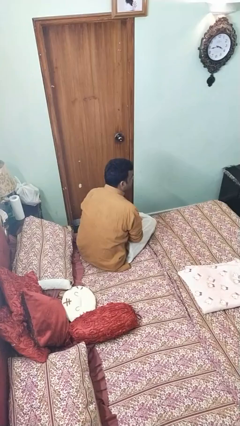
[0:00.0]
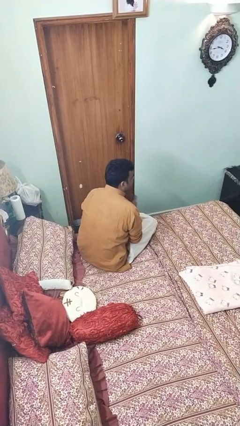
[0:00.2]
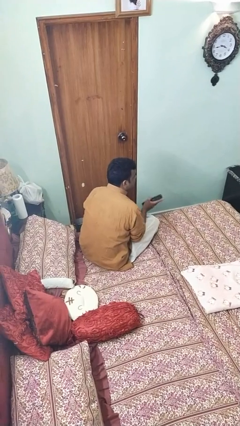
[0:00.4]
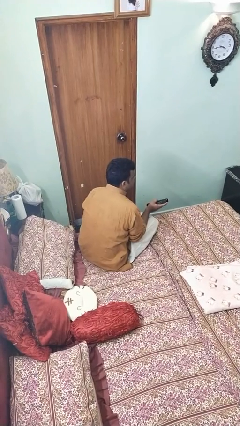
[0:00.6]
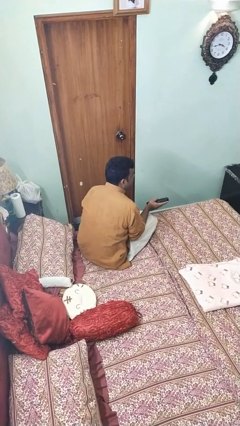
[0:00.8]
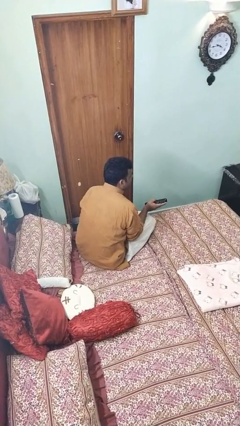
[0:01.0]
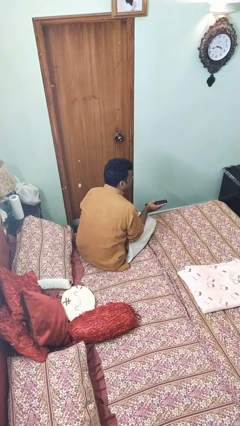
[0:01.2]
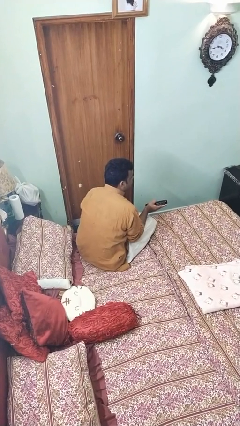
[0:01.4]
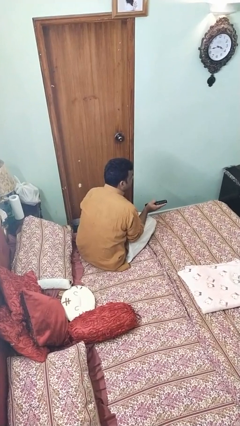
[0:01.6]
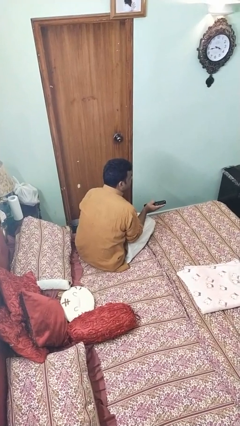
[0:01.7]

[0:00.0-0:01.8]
person uses television remote

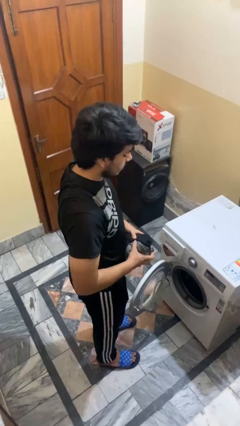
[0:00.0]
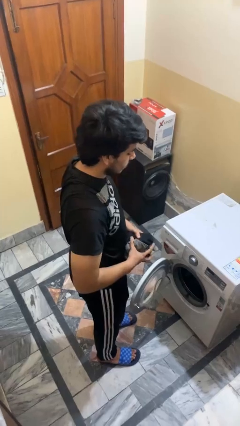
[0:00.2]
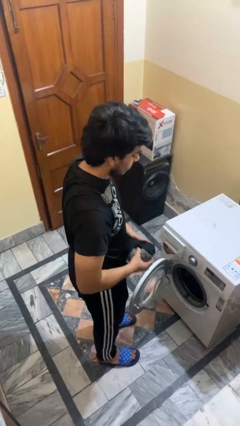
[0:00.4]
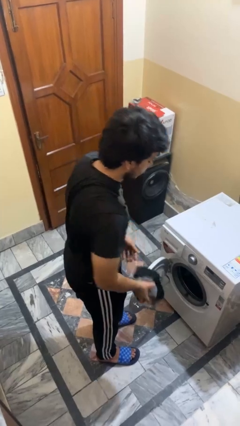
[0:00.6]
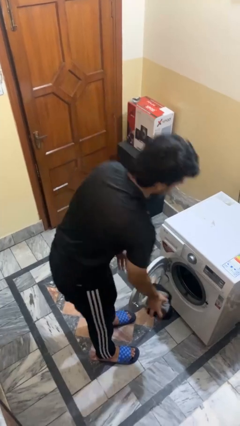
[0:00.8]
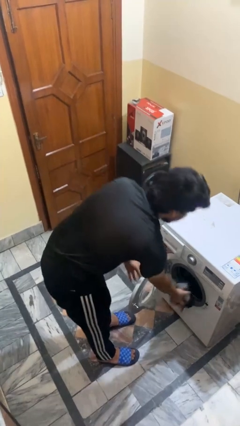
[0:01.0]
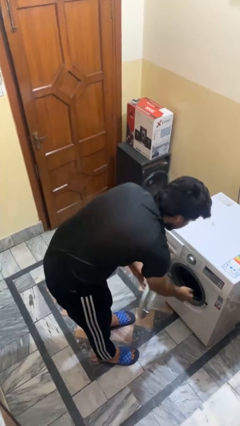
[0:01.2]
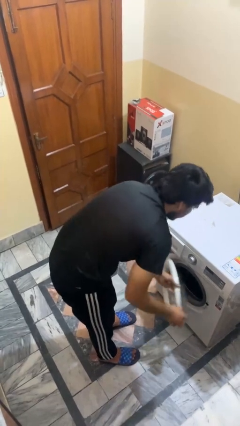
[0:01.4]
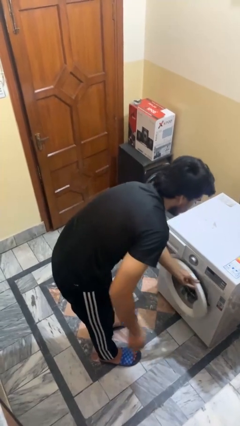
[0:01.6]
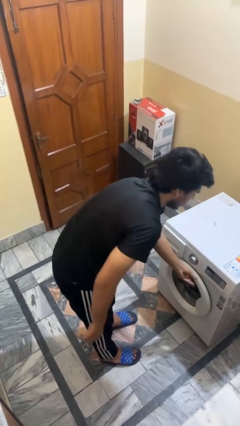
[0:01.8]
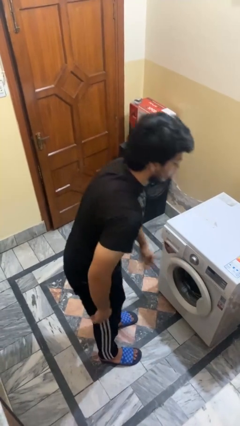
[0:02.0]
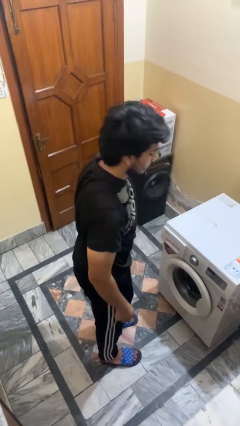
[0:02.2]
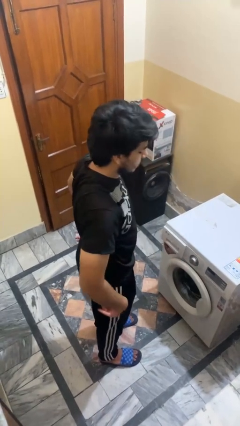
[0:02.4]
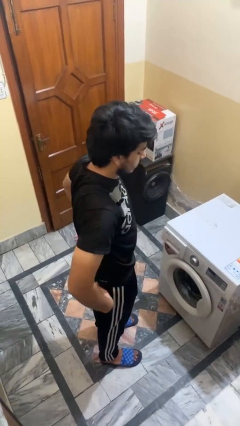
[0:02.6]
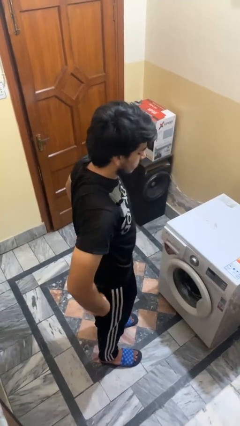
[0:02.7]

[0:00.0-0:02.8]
person loads clotheswasher

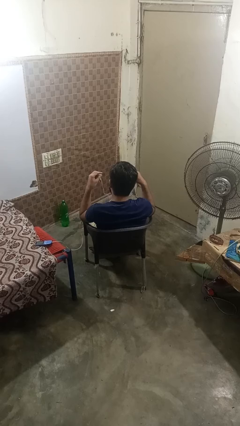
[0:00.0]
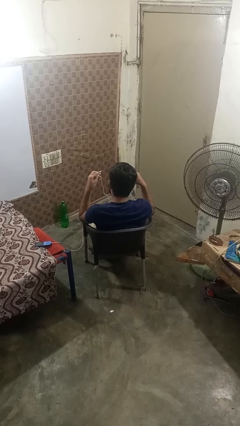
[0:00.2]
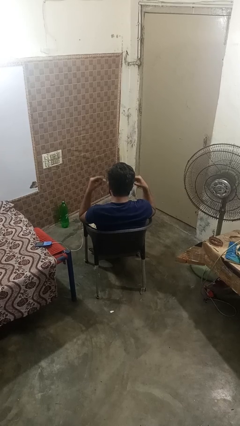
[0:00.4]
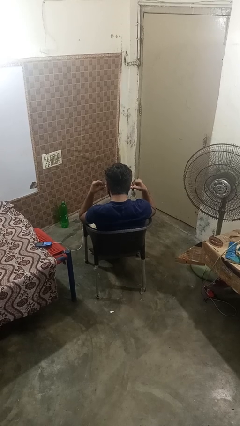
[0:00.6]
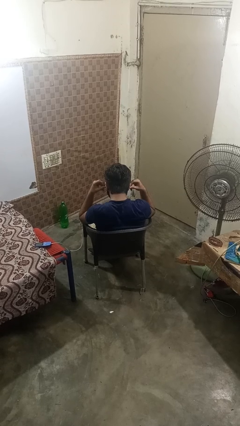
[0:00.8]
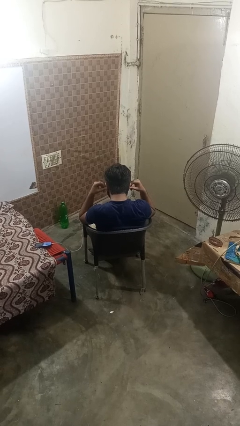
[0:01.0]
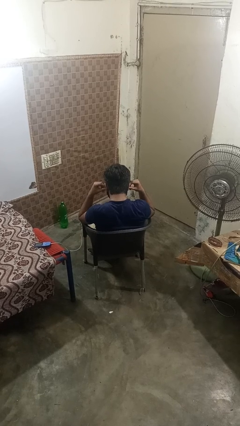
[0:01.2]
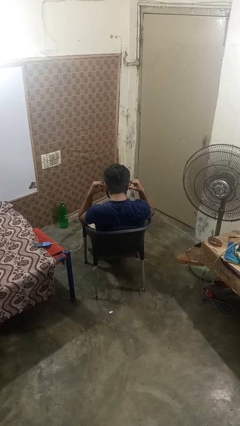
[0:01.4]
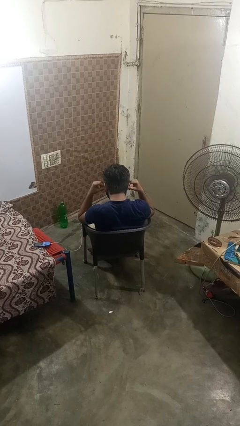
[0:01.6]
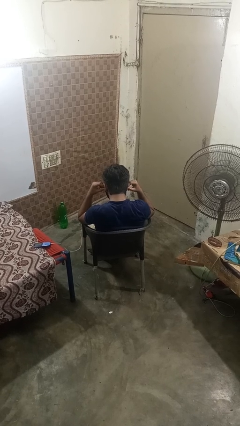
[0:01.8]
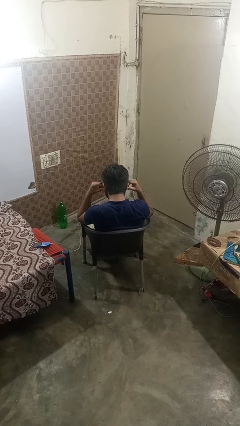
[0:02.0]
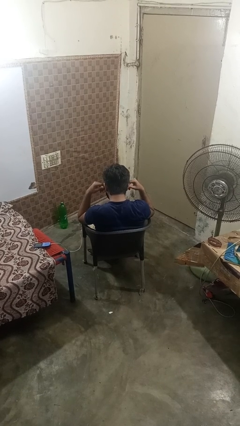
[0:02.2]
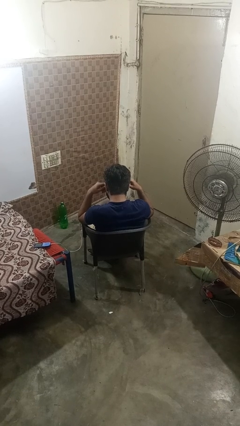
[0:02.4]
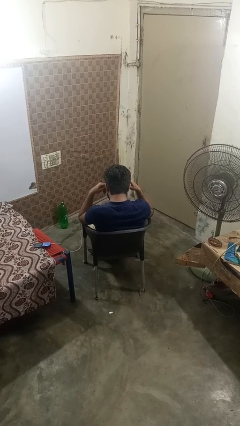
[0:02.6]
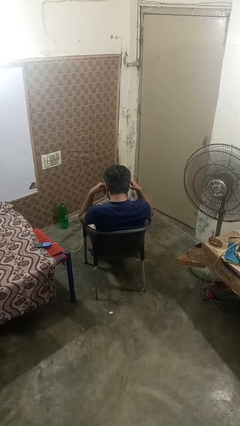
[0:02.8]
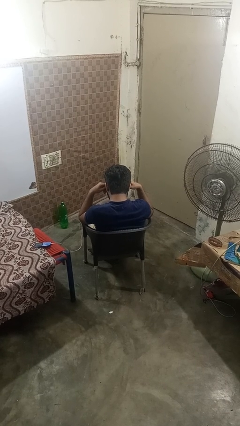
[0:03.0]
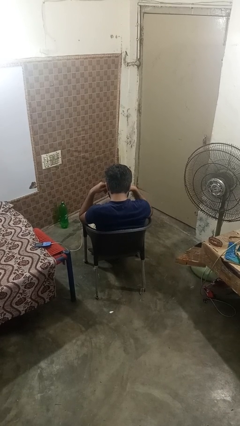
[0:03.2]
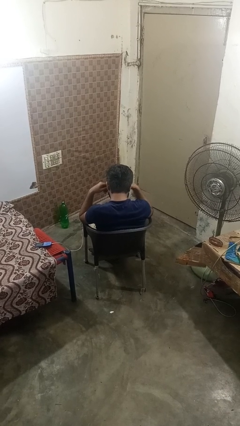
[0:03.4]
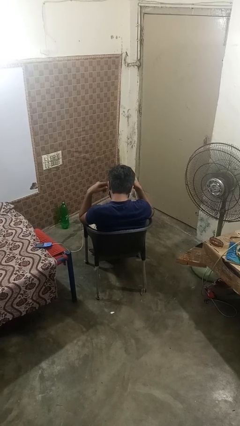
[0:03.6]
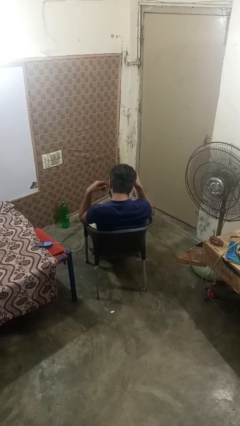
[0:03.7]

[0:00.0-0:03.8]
person puts on headphones

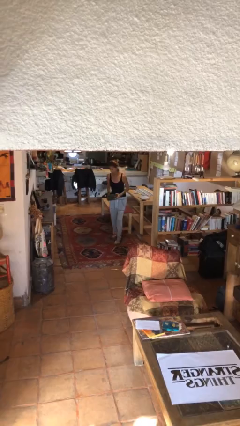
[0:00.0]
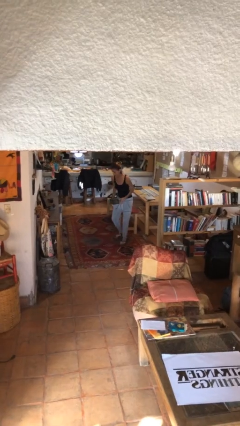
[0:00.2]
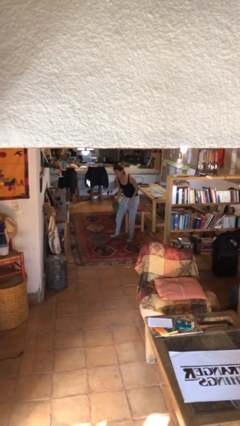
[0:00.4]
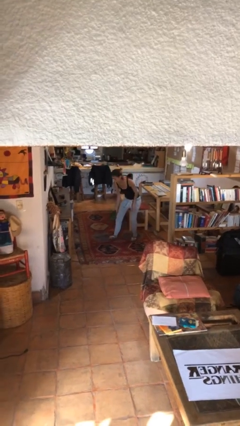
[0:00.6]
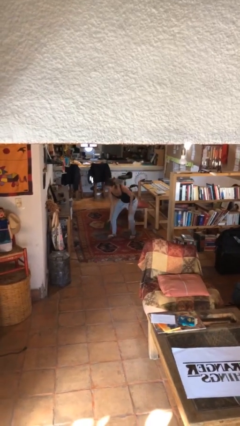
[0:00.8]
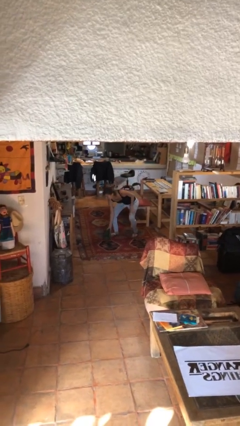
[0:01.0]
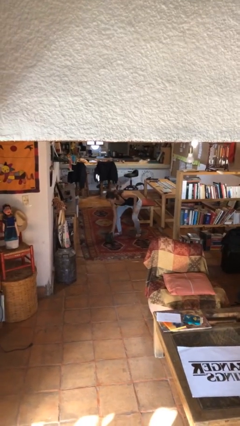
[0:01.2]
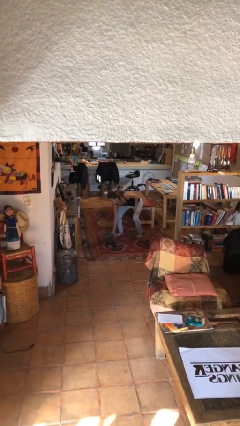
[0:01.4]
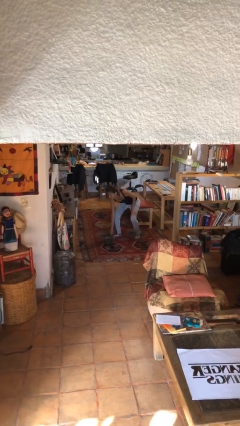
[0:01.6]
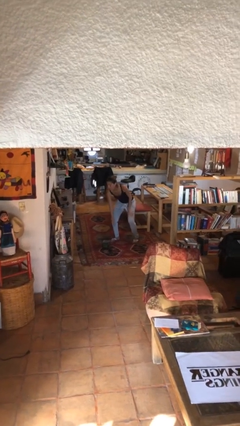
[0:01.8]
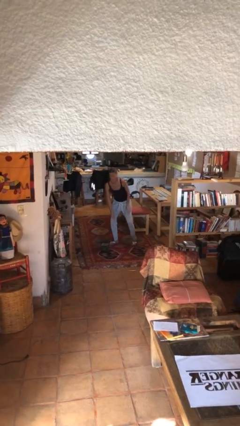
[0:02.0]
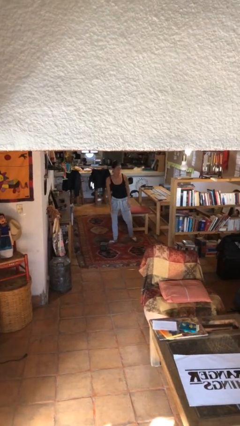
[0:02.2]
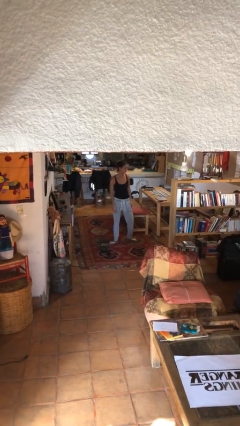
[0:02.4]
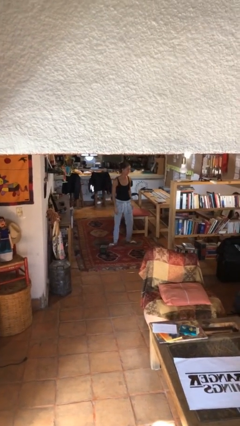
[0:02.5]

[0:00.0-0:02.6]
person puts down object on floor

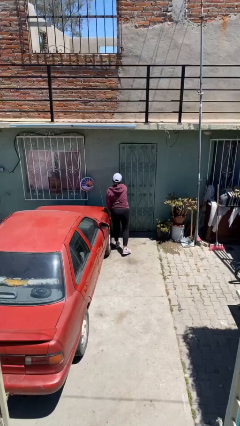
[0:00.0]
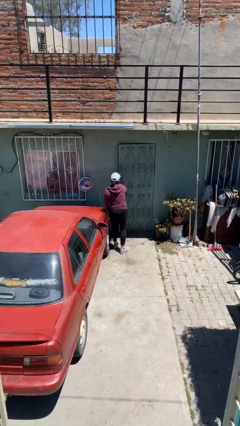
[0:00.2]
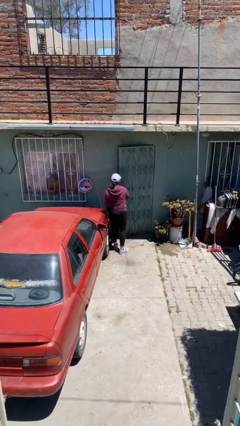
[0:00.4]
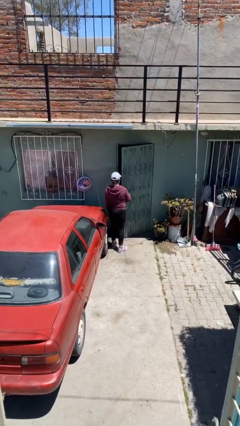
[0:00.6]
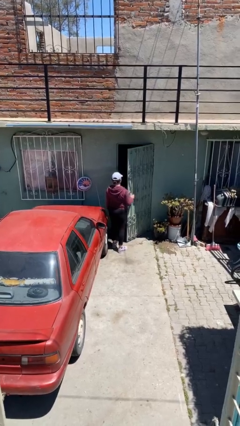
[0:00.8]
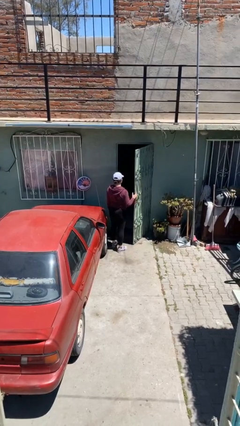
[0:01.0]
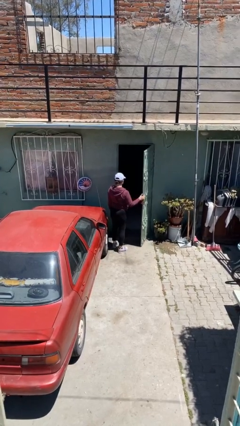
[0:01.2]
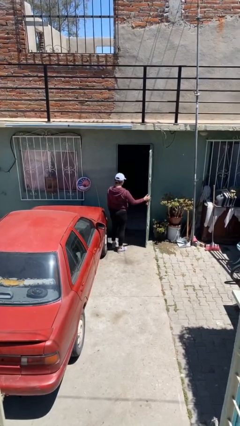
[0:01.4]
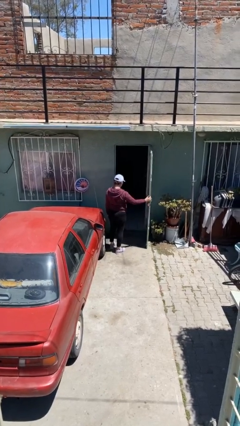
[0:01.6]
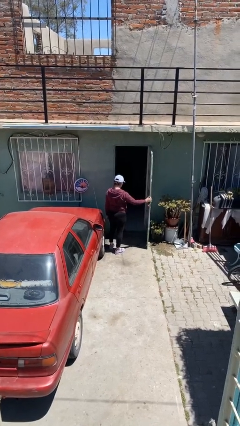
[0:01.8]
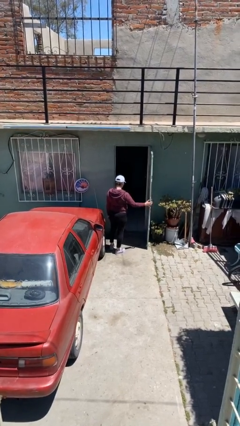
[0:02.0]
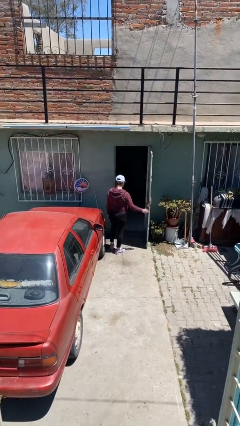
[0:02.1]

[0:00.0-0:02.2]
person opens facility door

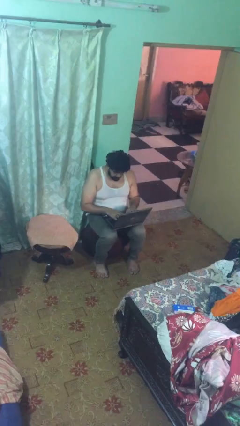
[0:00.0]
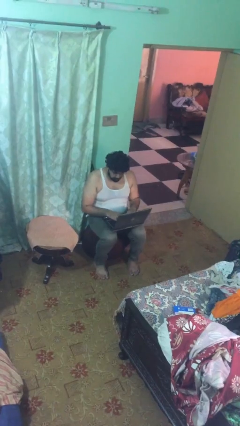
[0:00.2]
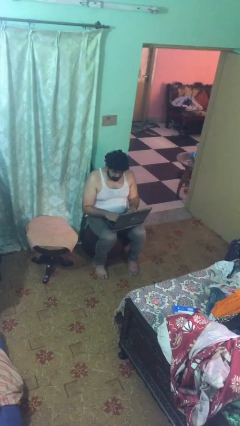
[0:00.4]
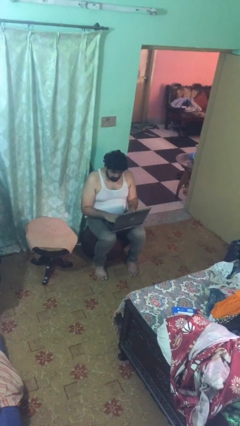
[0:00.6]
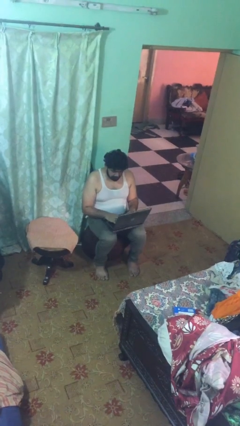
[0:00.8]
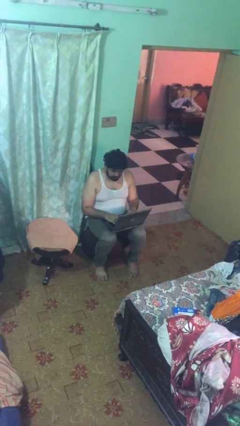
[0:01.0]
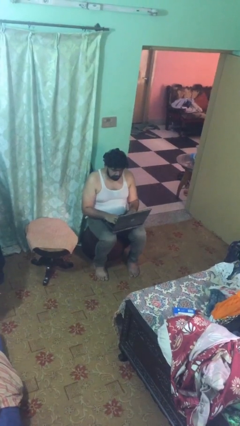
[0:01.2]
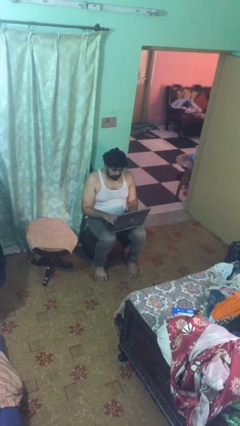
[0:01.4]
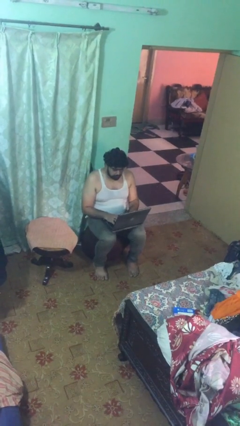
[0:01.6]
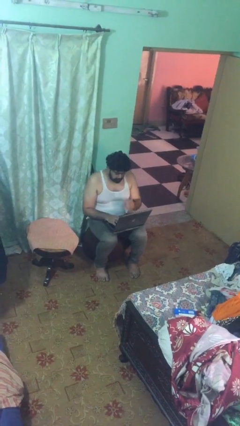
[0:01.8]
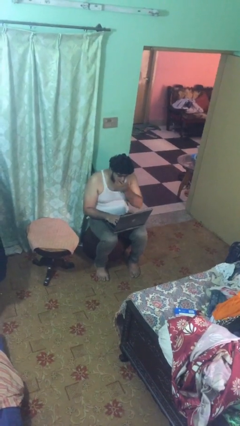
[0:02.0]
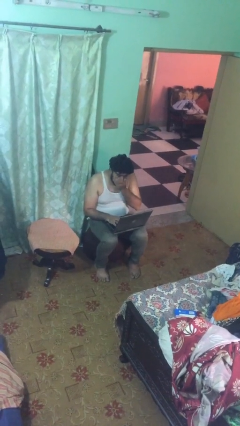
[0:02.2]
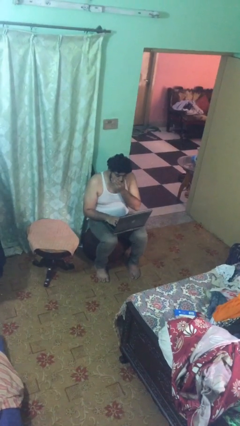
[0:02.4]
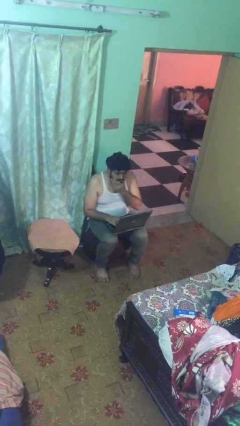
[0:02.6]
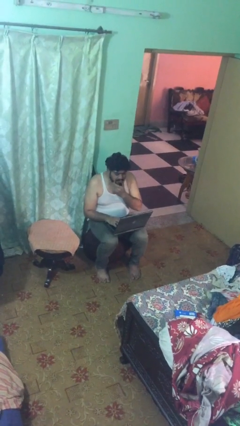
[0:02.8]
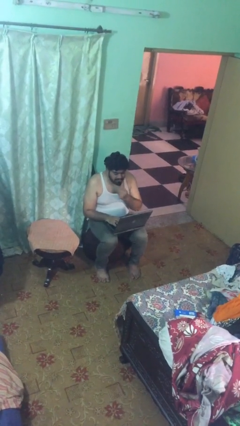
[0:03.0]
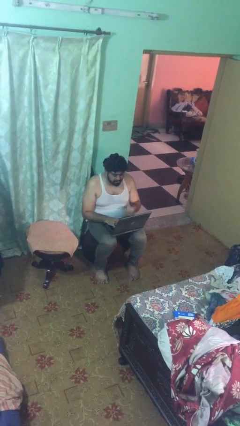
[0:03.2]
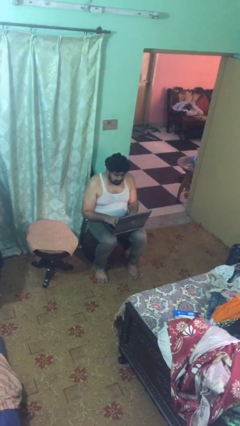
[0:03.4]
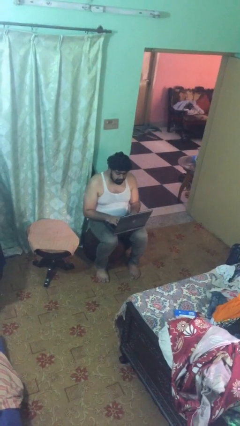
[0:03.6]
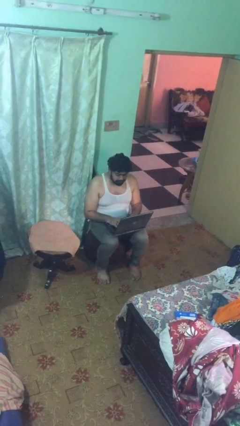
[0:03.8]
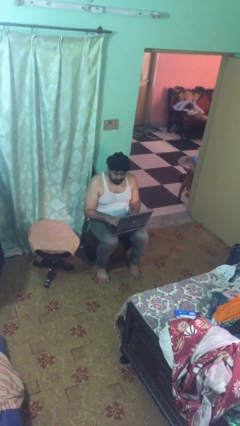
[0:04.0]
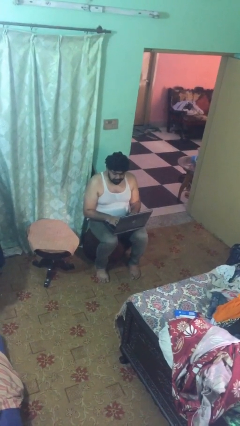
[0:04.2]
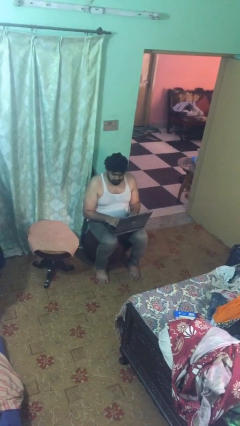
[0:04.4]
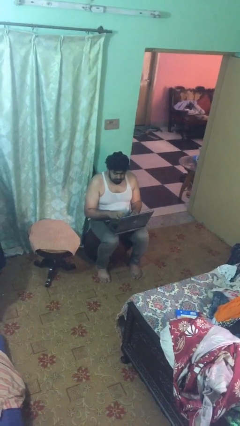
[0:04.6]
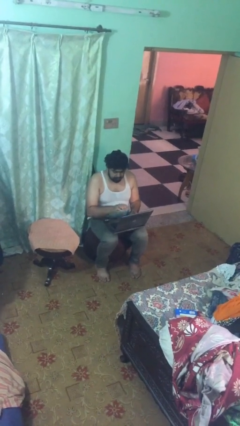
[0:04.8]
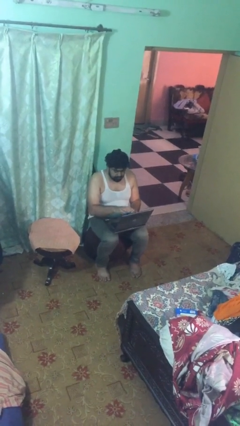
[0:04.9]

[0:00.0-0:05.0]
person interacts with laptop
